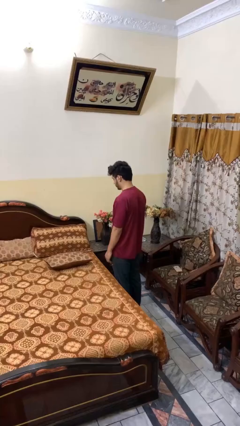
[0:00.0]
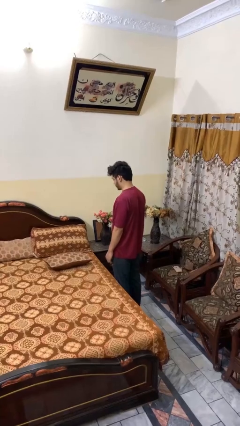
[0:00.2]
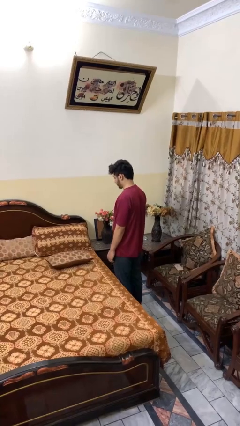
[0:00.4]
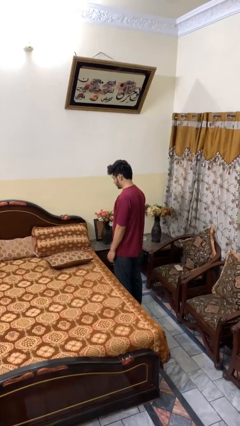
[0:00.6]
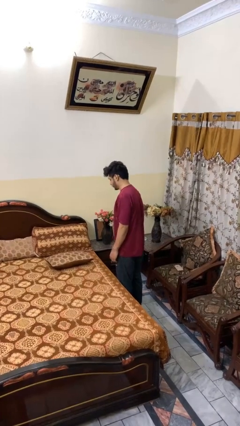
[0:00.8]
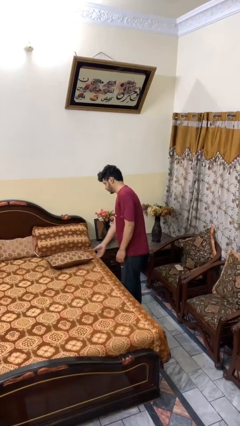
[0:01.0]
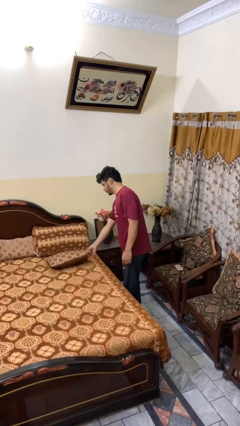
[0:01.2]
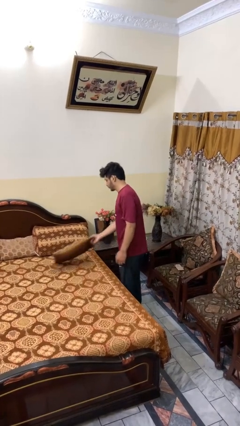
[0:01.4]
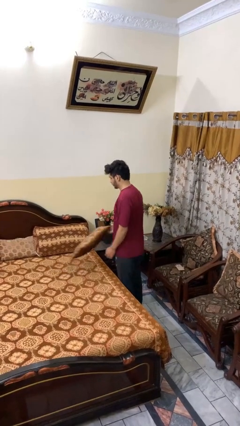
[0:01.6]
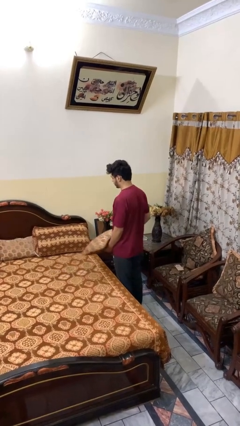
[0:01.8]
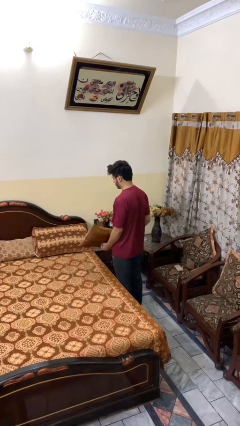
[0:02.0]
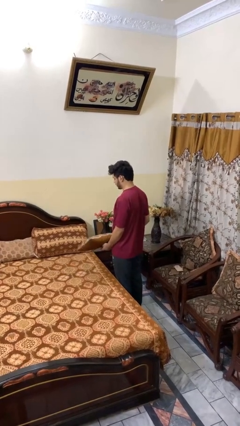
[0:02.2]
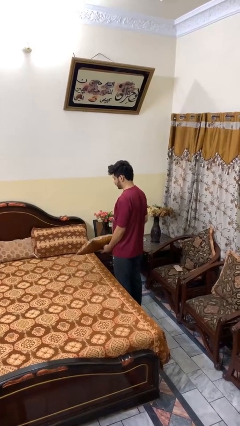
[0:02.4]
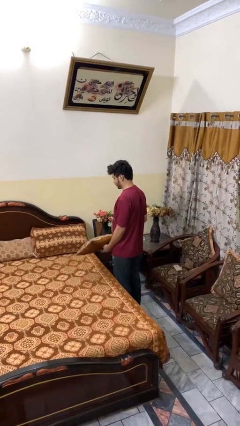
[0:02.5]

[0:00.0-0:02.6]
person picks up object from bed

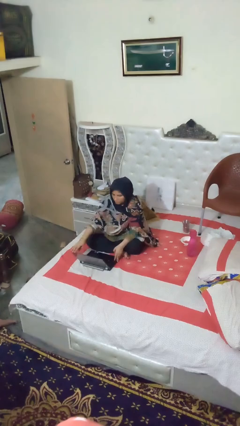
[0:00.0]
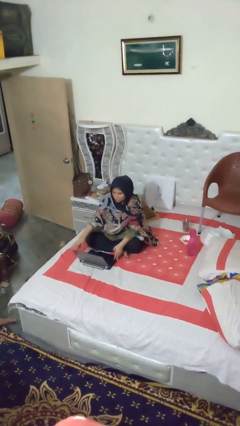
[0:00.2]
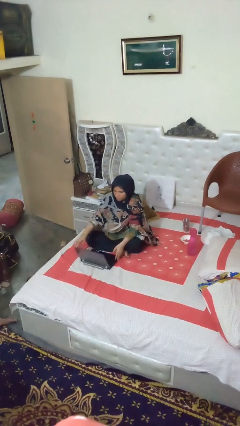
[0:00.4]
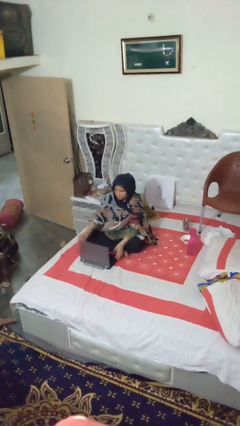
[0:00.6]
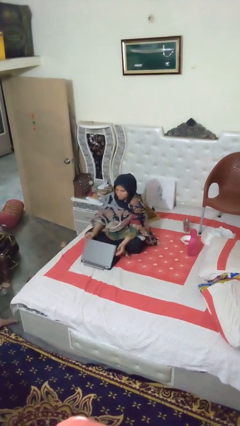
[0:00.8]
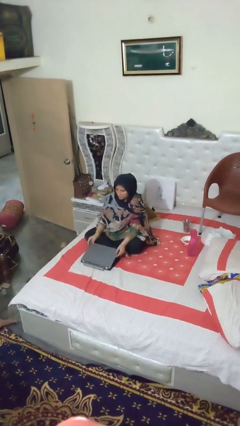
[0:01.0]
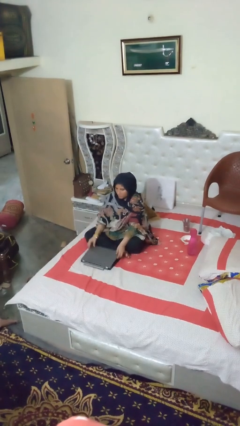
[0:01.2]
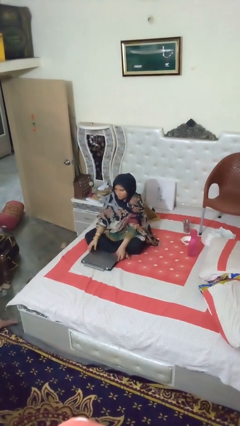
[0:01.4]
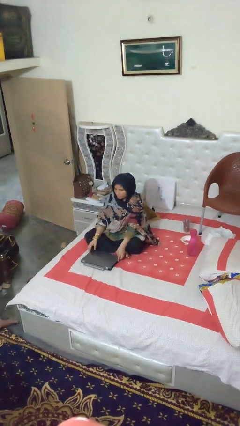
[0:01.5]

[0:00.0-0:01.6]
person closes laptop

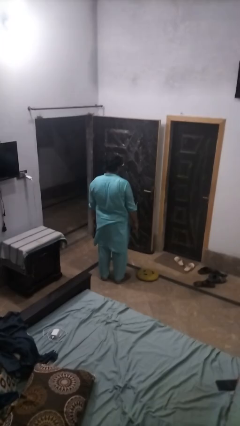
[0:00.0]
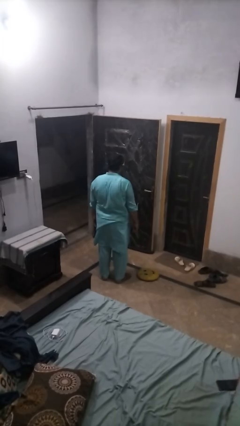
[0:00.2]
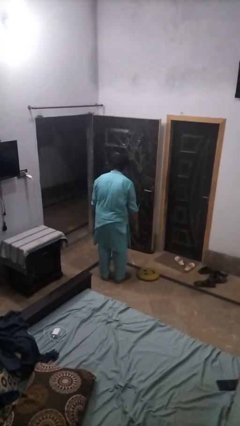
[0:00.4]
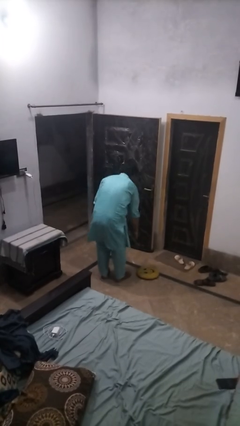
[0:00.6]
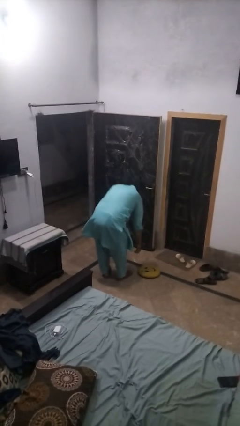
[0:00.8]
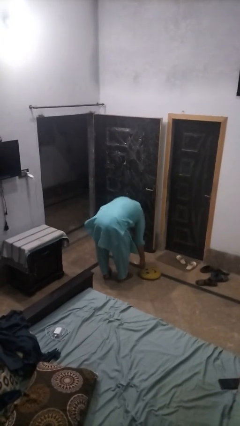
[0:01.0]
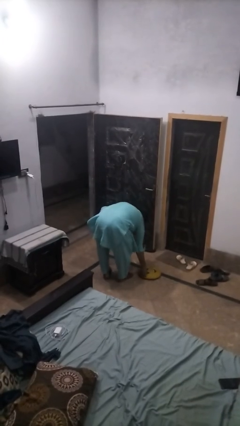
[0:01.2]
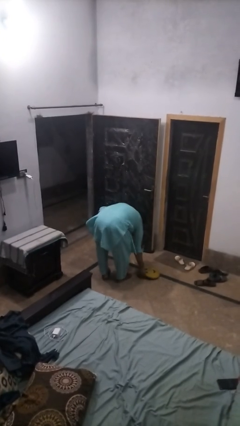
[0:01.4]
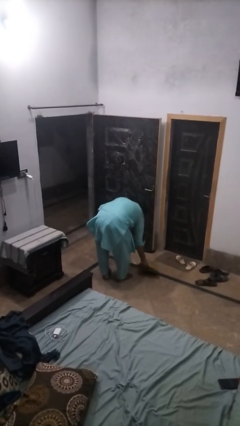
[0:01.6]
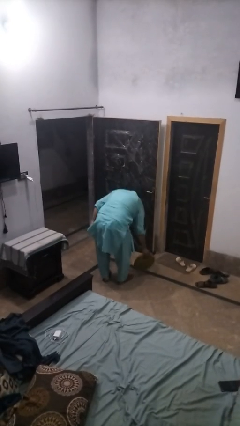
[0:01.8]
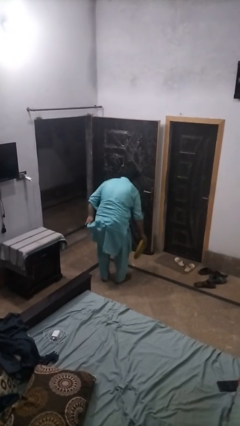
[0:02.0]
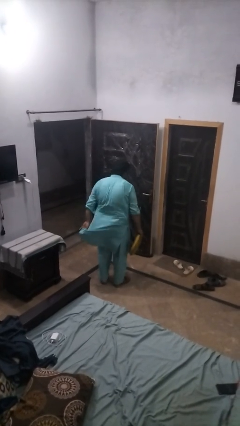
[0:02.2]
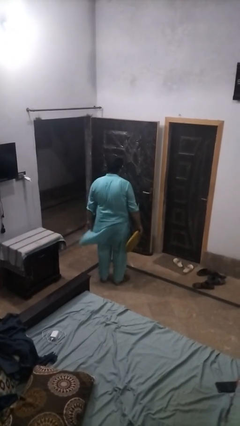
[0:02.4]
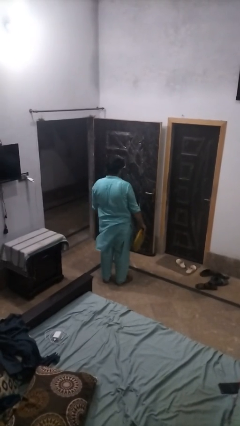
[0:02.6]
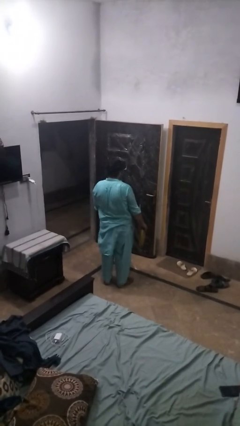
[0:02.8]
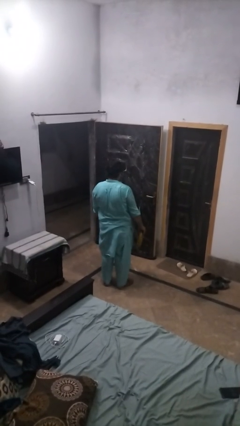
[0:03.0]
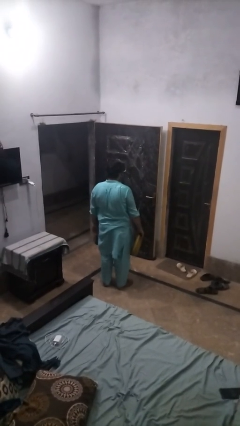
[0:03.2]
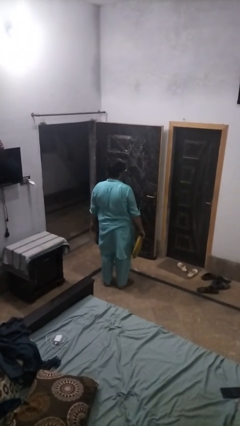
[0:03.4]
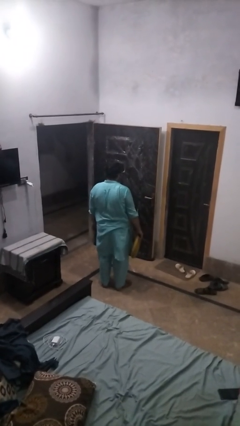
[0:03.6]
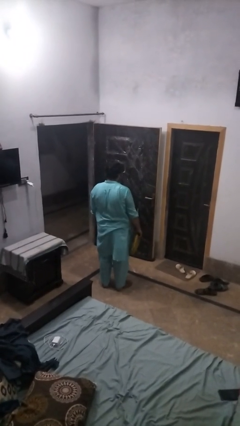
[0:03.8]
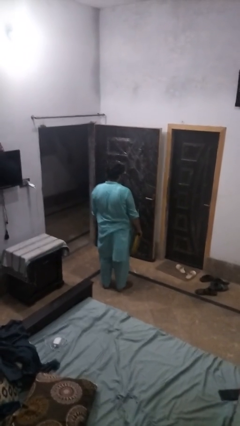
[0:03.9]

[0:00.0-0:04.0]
person picks up object from floor

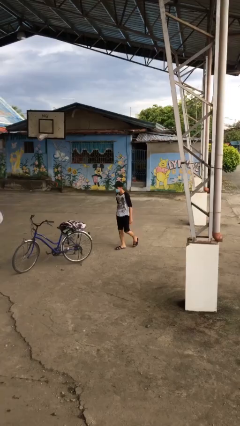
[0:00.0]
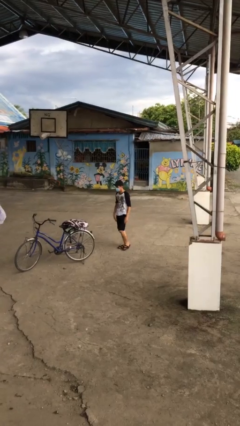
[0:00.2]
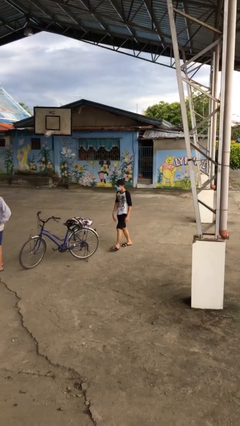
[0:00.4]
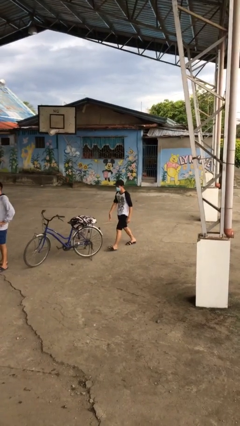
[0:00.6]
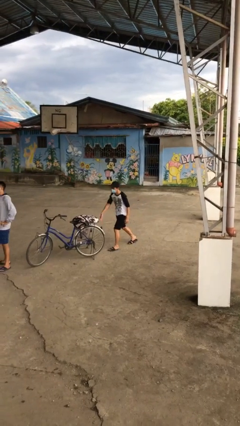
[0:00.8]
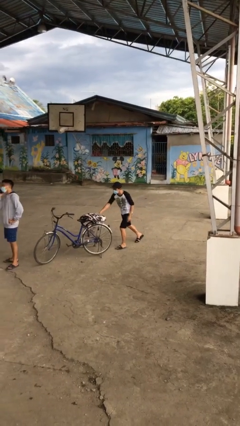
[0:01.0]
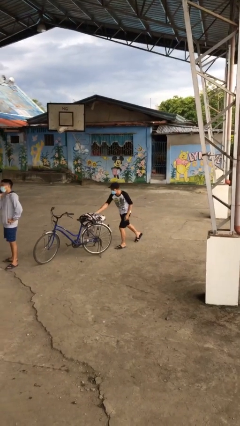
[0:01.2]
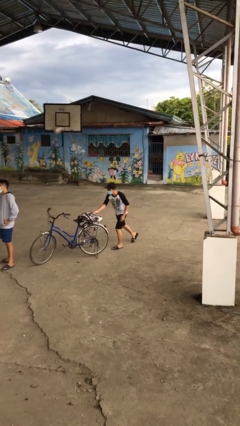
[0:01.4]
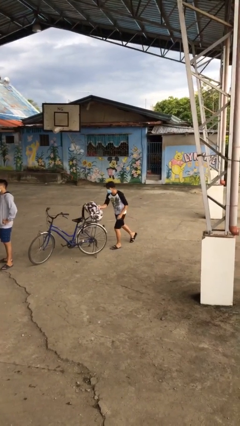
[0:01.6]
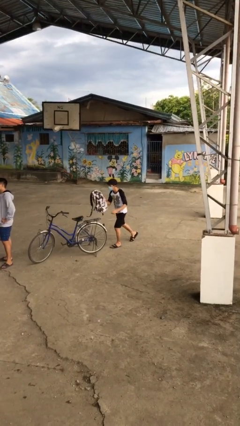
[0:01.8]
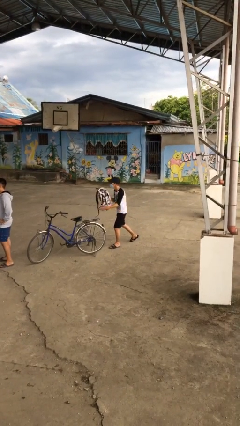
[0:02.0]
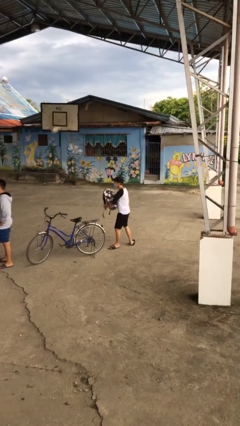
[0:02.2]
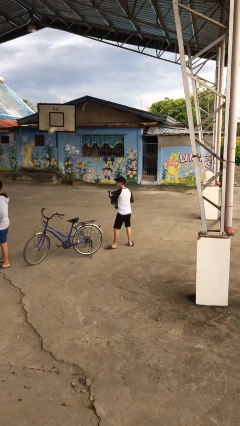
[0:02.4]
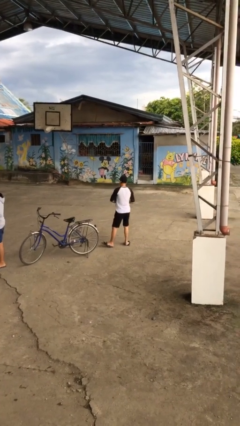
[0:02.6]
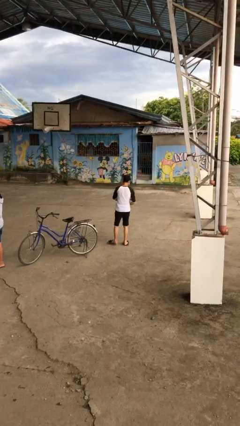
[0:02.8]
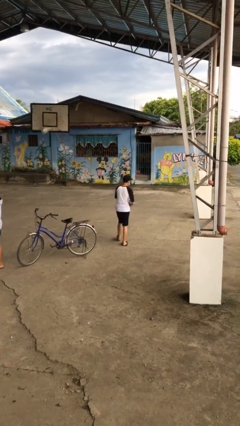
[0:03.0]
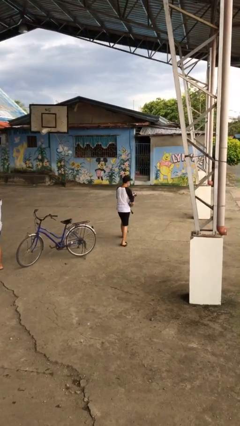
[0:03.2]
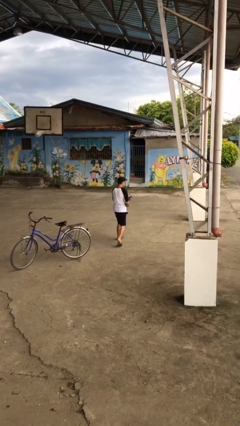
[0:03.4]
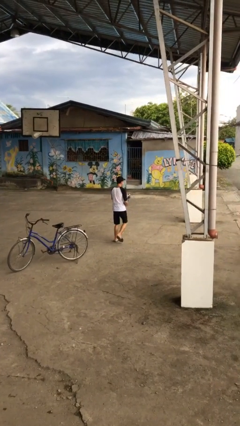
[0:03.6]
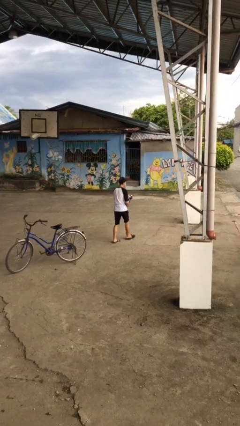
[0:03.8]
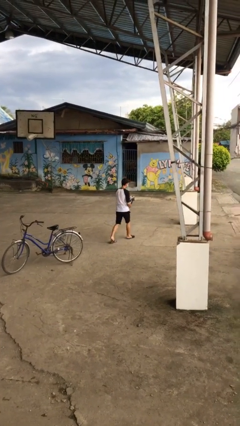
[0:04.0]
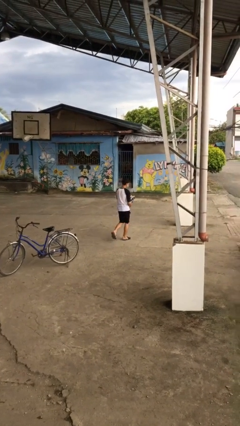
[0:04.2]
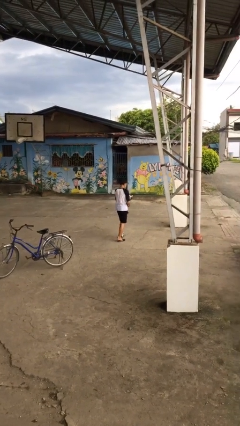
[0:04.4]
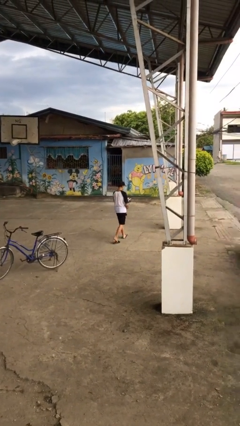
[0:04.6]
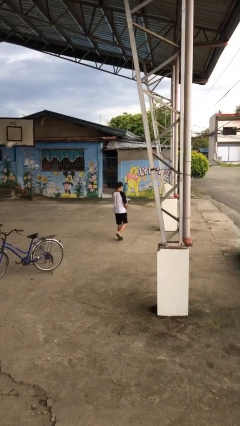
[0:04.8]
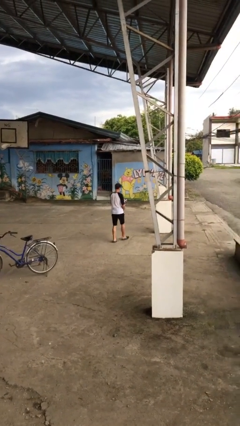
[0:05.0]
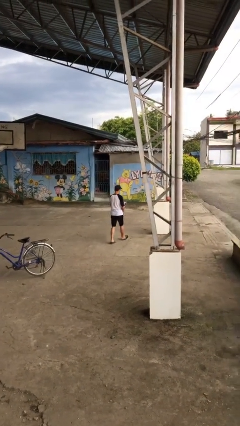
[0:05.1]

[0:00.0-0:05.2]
person steals object from person

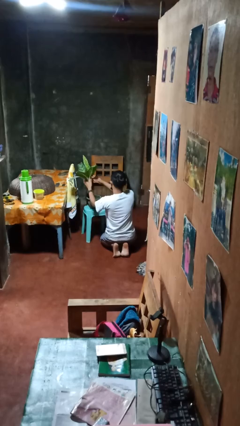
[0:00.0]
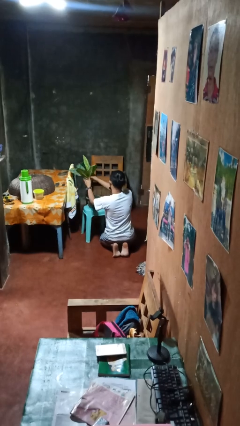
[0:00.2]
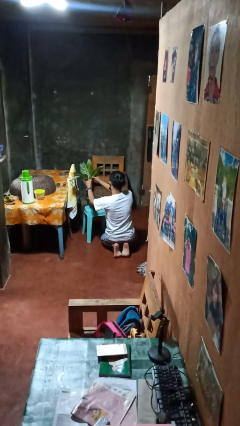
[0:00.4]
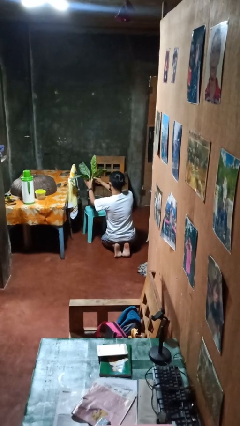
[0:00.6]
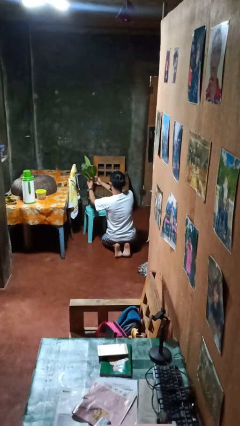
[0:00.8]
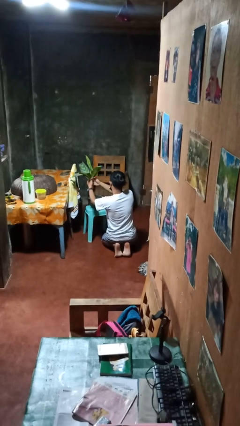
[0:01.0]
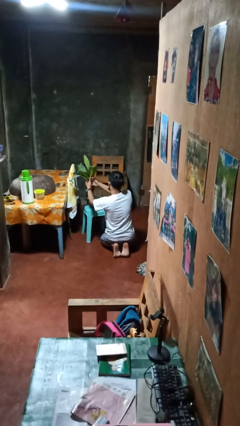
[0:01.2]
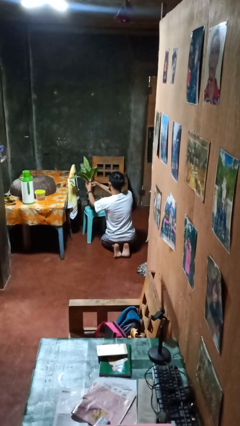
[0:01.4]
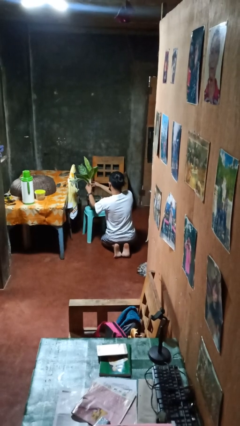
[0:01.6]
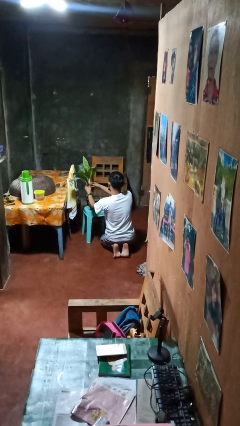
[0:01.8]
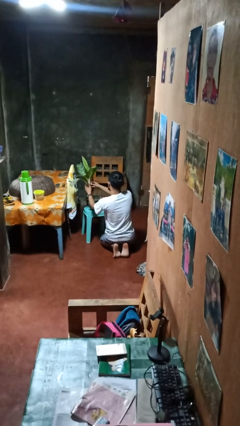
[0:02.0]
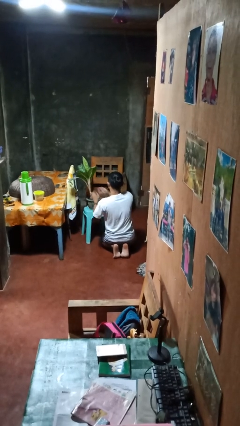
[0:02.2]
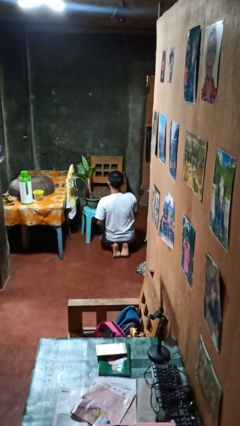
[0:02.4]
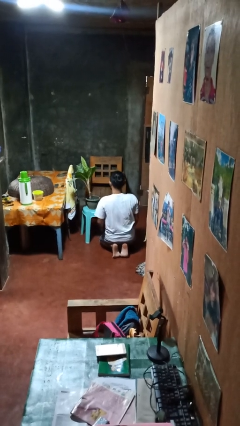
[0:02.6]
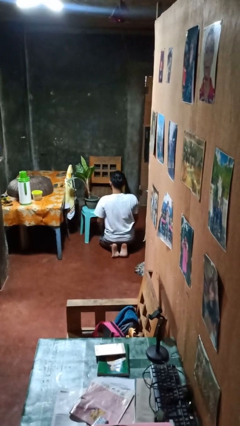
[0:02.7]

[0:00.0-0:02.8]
person arranges flowers in vase

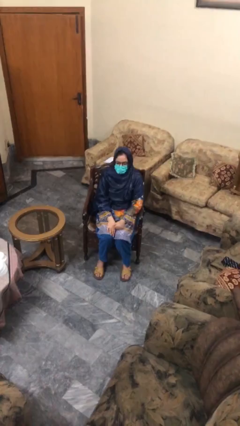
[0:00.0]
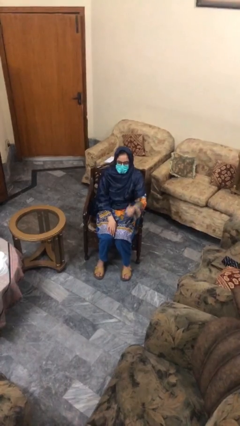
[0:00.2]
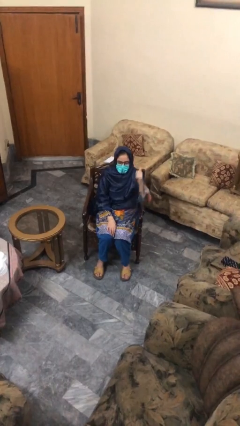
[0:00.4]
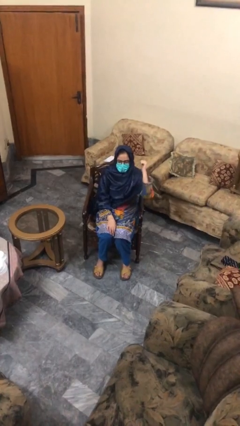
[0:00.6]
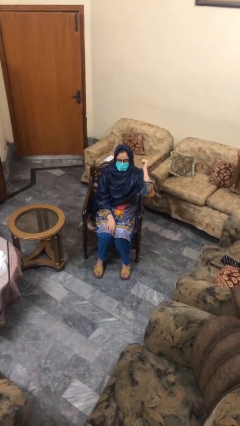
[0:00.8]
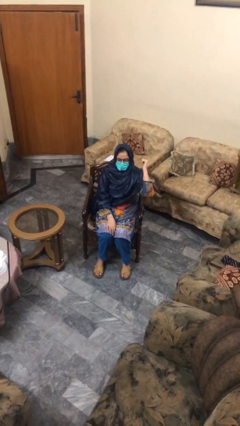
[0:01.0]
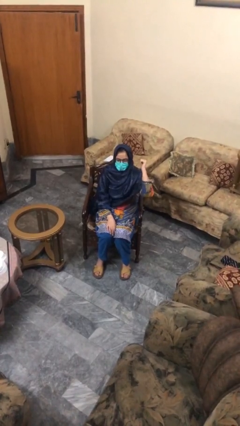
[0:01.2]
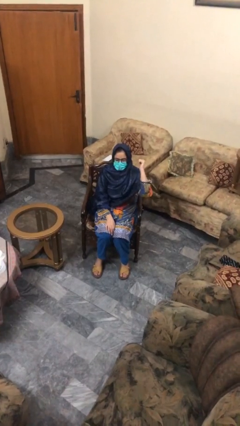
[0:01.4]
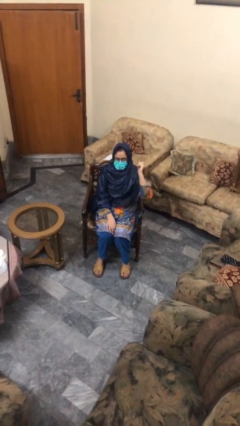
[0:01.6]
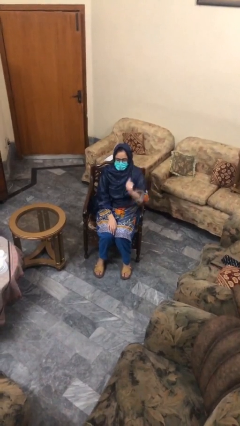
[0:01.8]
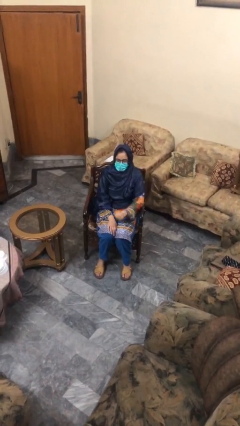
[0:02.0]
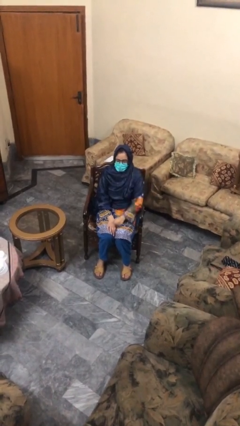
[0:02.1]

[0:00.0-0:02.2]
person gestures behind me
